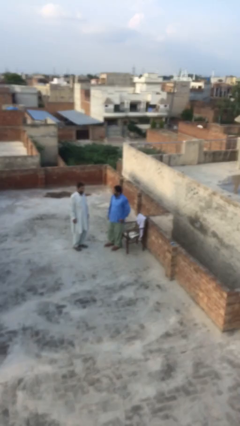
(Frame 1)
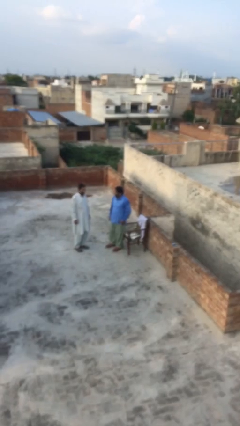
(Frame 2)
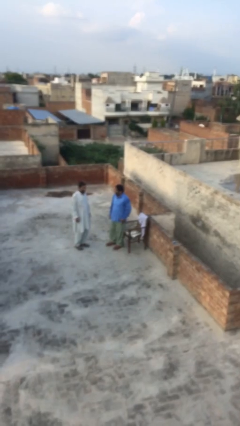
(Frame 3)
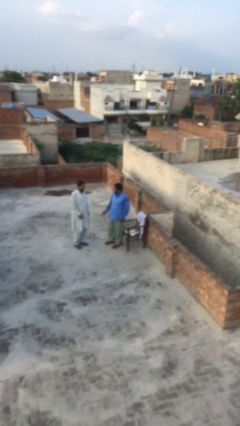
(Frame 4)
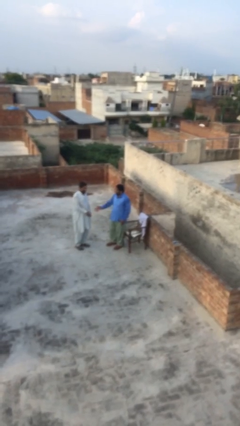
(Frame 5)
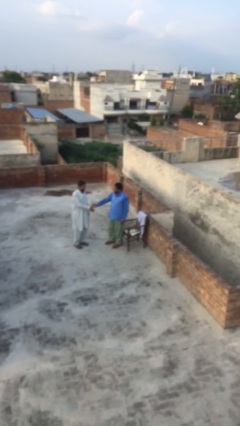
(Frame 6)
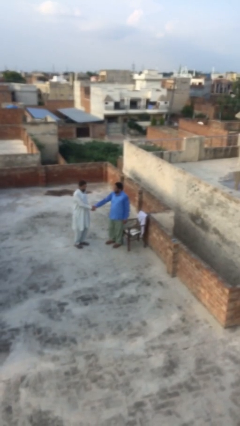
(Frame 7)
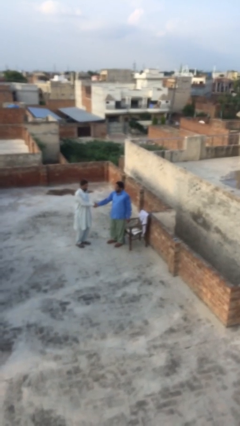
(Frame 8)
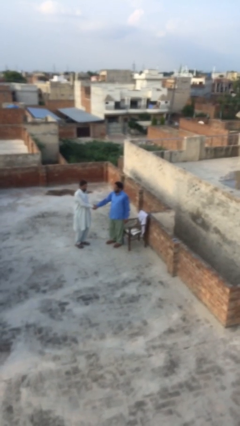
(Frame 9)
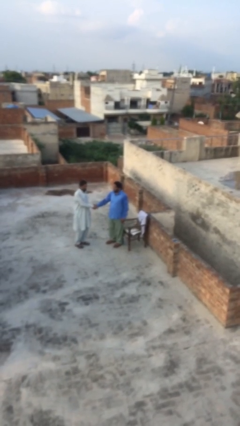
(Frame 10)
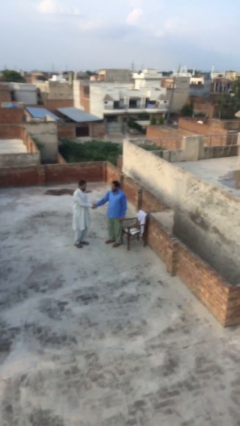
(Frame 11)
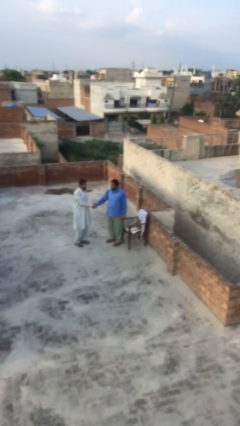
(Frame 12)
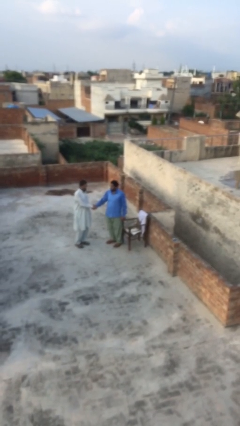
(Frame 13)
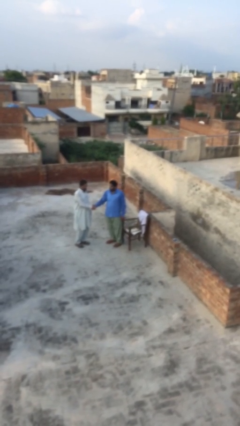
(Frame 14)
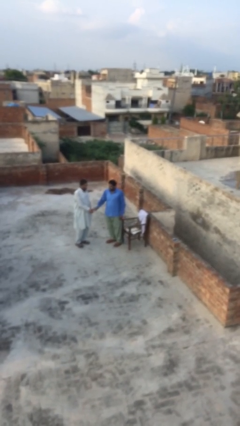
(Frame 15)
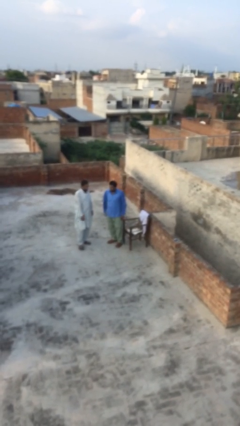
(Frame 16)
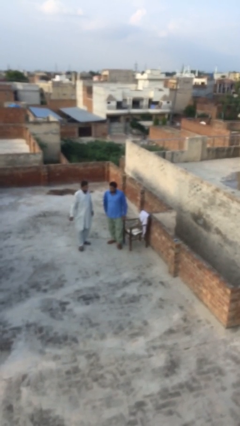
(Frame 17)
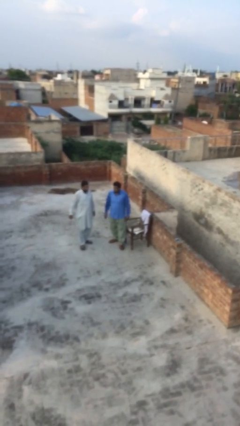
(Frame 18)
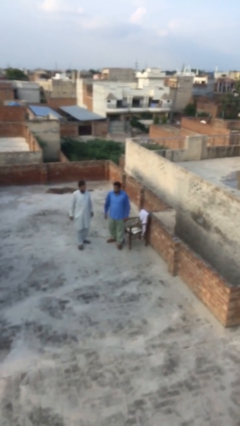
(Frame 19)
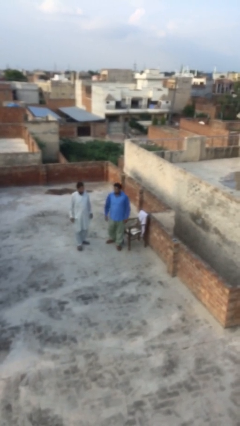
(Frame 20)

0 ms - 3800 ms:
person shakes hand

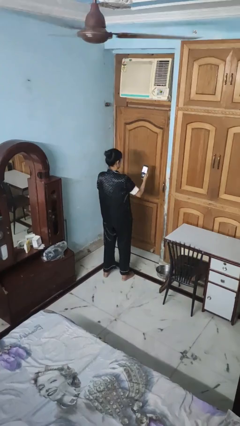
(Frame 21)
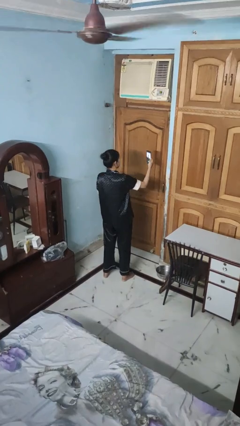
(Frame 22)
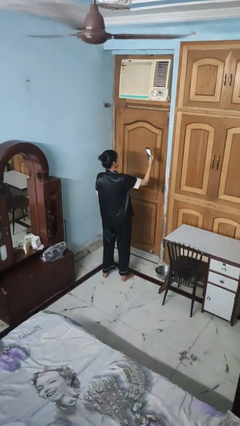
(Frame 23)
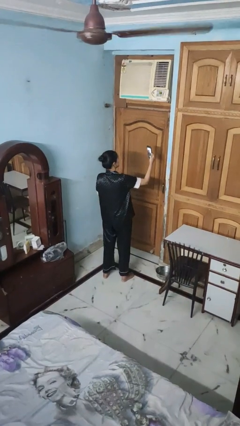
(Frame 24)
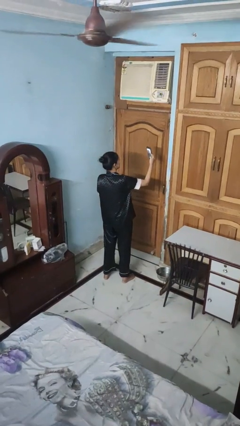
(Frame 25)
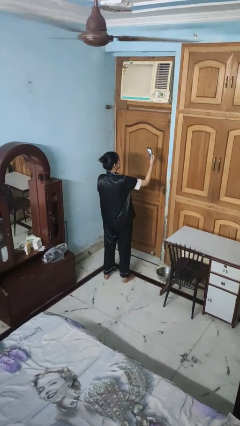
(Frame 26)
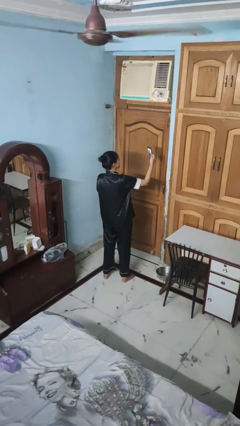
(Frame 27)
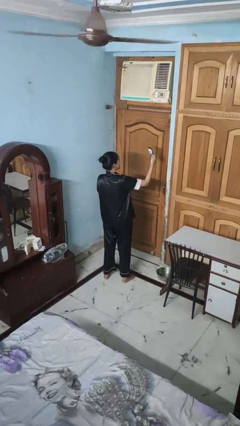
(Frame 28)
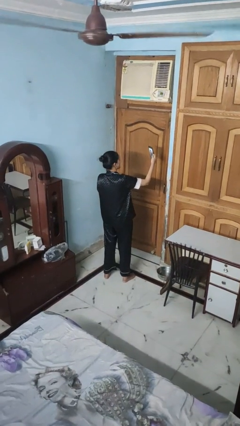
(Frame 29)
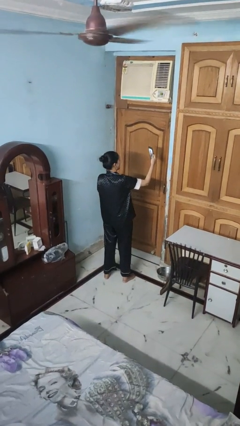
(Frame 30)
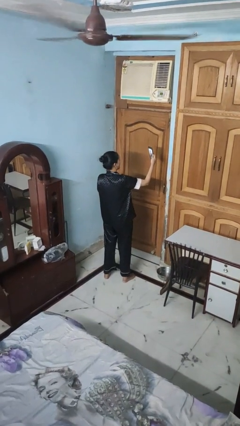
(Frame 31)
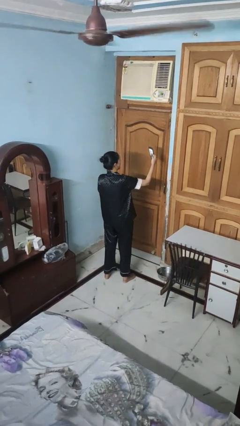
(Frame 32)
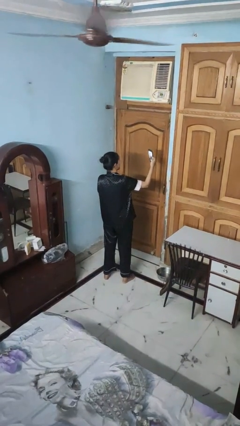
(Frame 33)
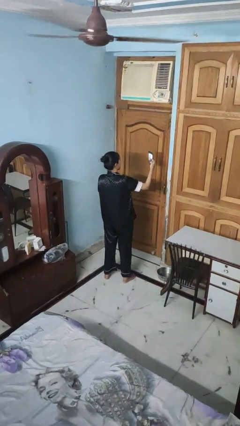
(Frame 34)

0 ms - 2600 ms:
person takes selfie

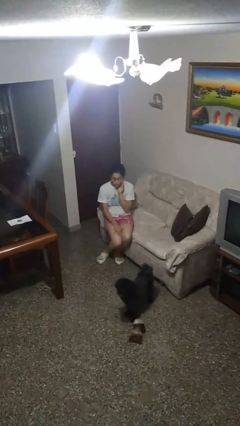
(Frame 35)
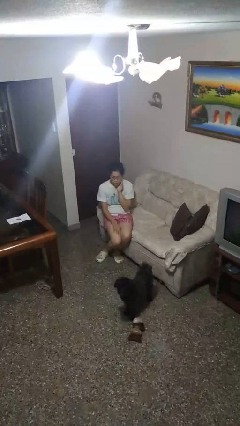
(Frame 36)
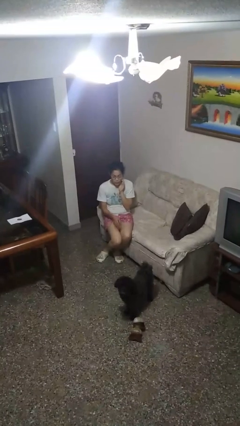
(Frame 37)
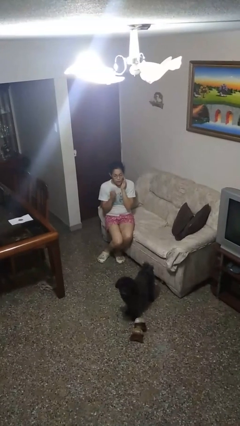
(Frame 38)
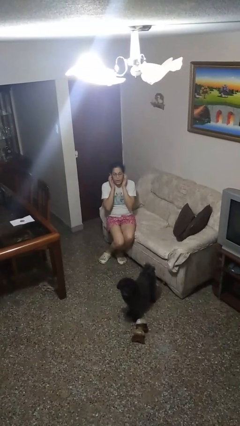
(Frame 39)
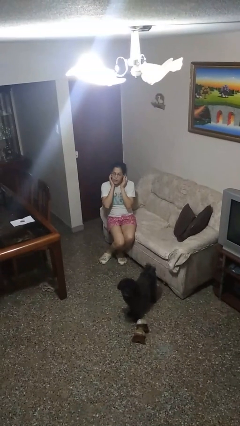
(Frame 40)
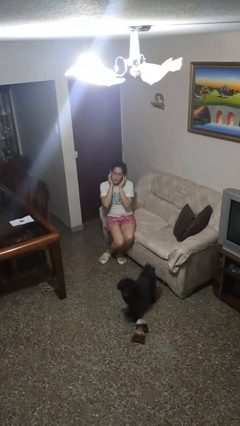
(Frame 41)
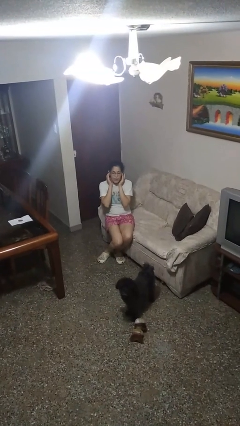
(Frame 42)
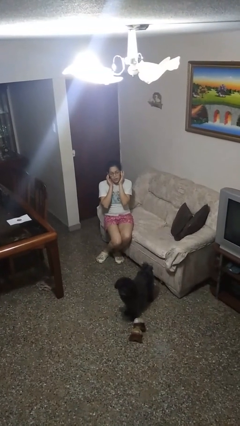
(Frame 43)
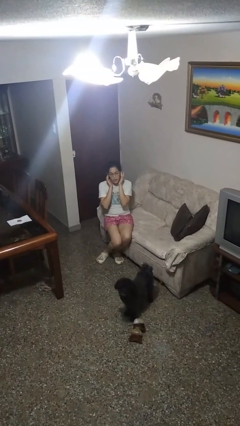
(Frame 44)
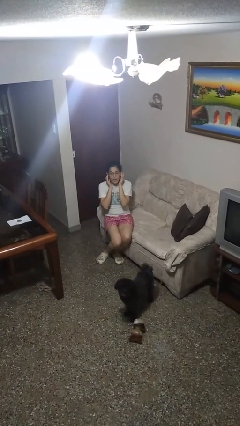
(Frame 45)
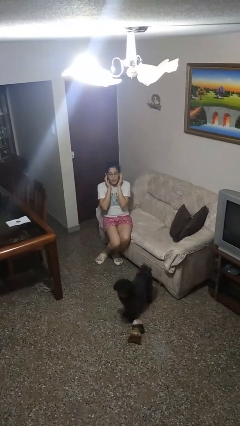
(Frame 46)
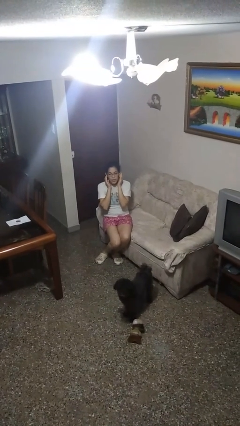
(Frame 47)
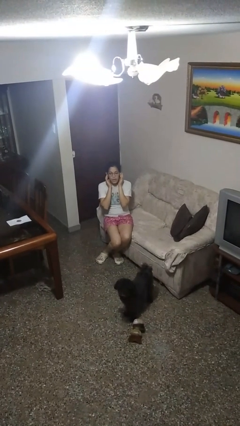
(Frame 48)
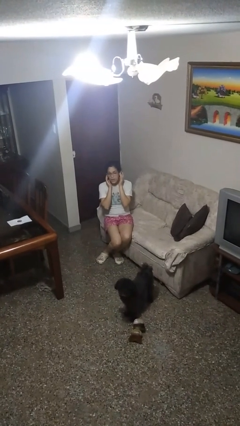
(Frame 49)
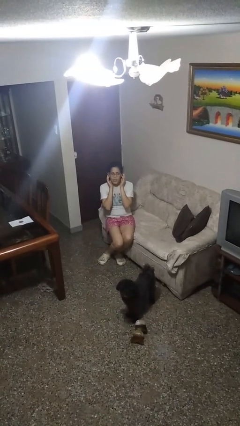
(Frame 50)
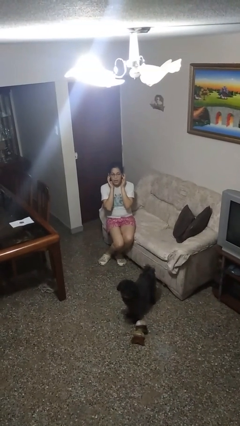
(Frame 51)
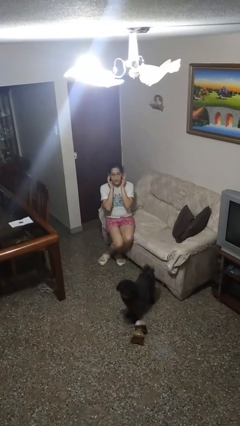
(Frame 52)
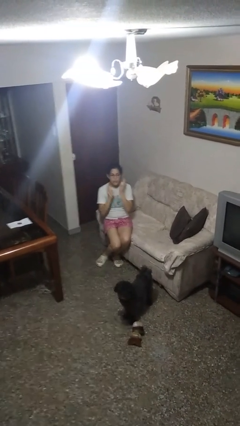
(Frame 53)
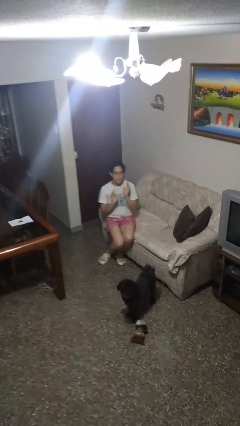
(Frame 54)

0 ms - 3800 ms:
person puts fingers in ear

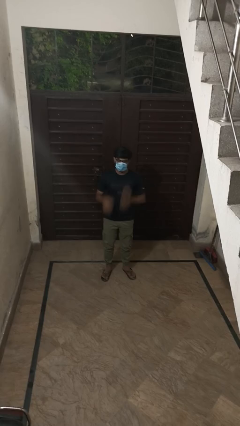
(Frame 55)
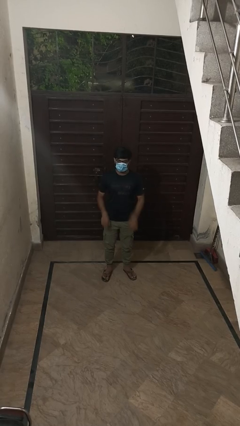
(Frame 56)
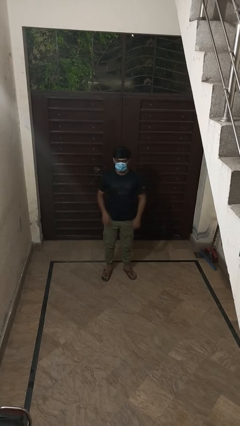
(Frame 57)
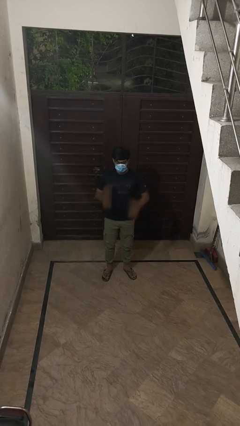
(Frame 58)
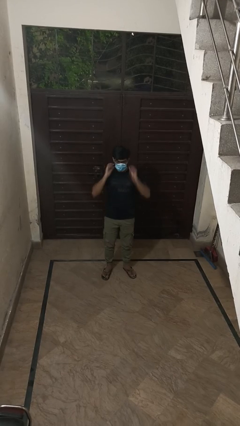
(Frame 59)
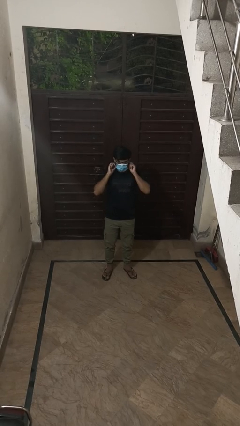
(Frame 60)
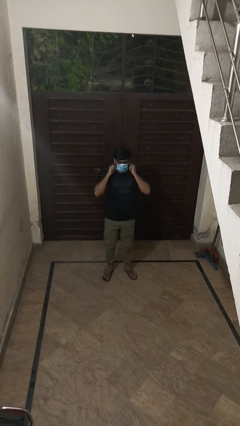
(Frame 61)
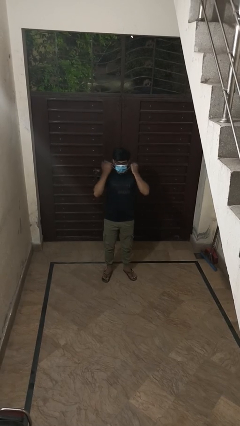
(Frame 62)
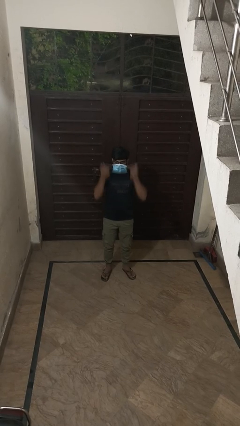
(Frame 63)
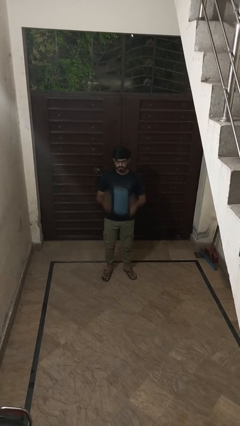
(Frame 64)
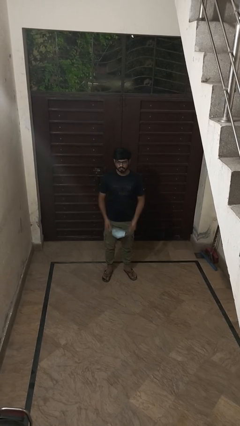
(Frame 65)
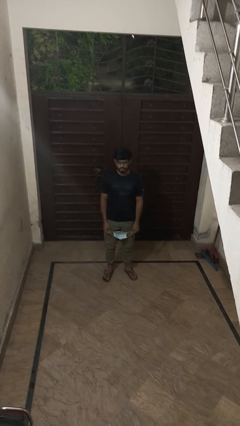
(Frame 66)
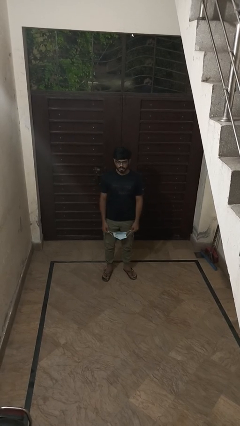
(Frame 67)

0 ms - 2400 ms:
person takes off facemask

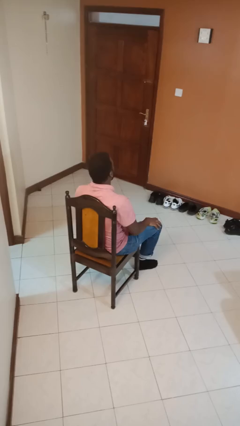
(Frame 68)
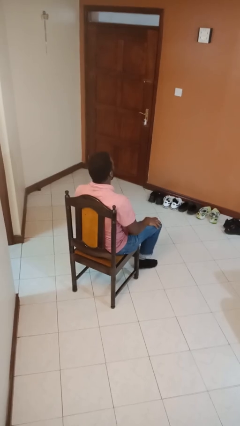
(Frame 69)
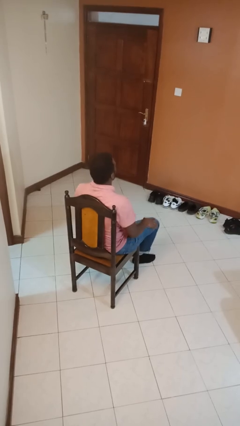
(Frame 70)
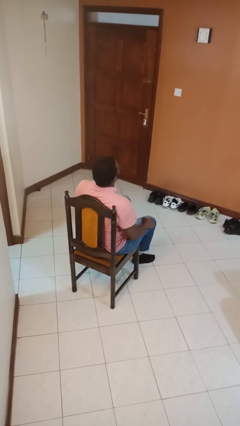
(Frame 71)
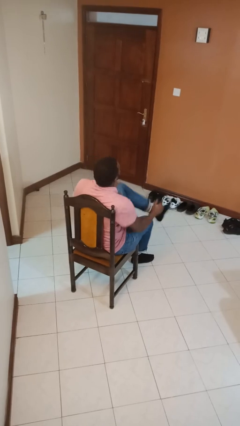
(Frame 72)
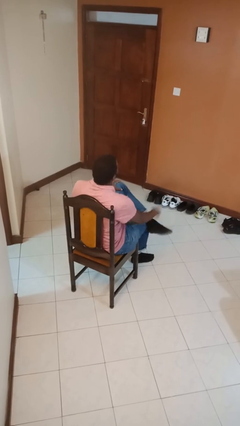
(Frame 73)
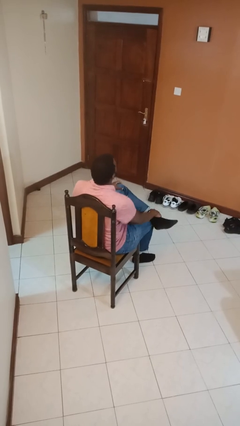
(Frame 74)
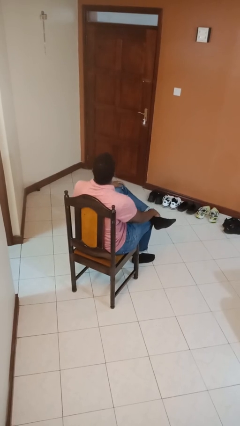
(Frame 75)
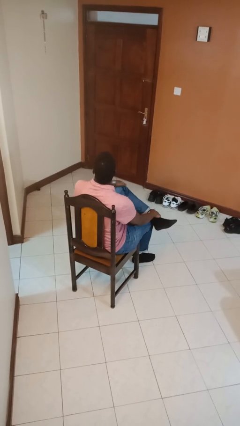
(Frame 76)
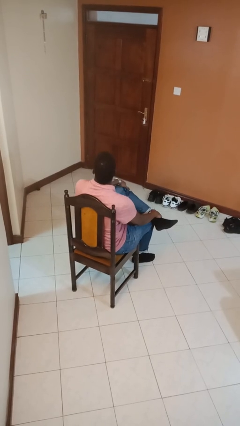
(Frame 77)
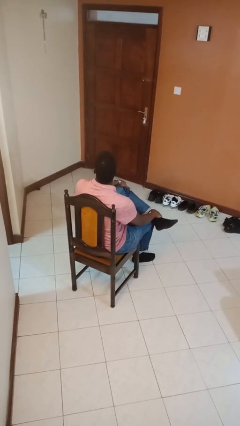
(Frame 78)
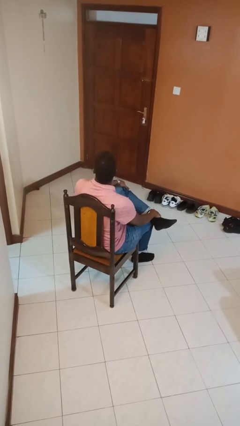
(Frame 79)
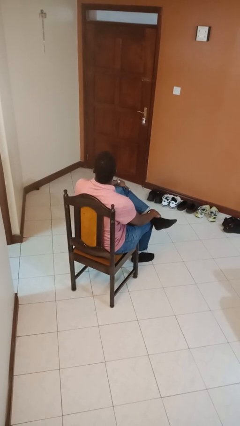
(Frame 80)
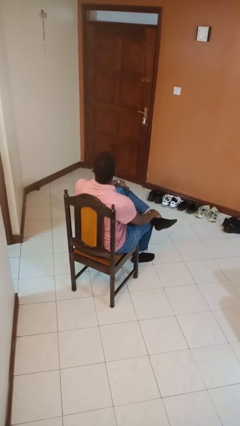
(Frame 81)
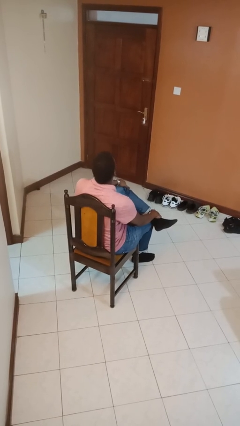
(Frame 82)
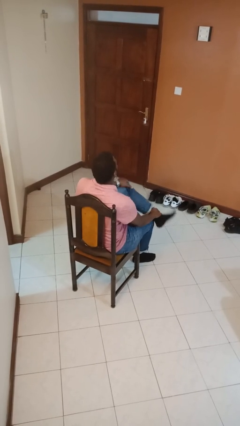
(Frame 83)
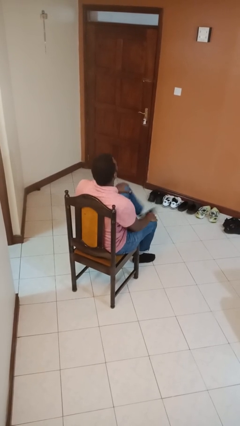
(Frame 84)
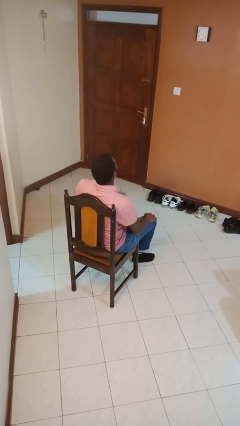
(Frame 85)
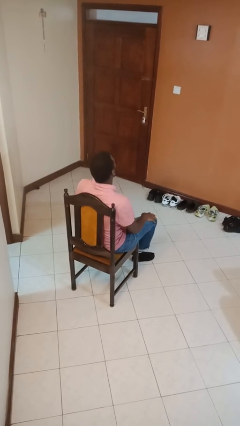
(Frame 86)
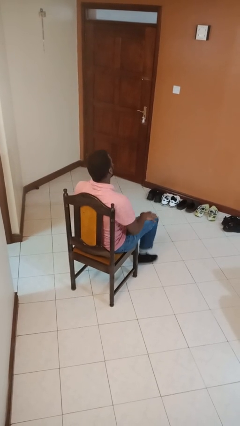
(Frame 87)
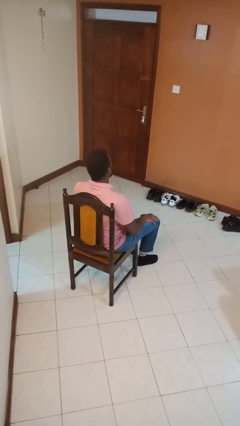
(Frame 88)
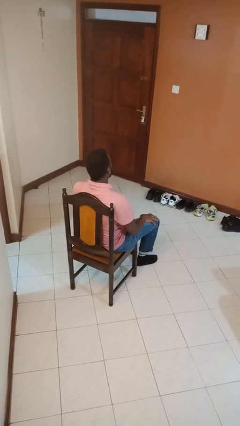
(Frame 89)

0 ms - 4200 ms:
person crosses legs

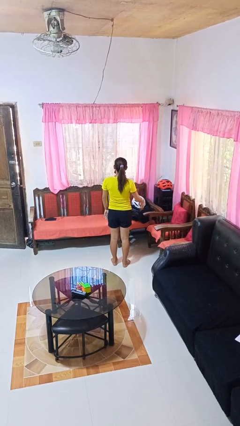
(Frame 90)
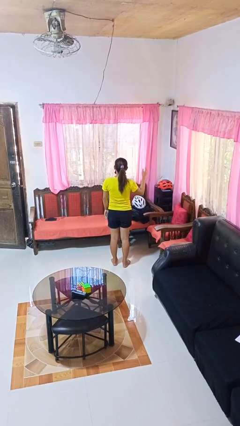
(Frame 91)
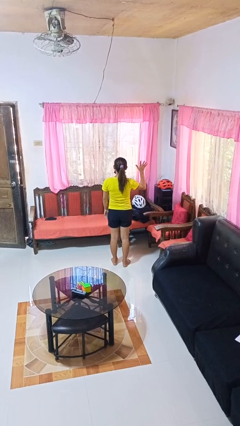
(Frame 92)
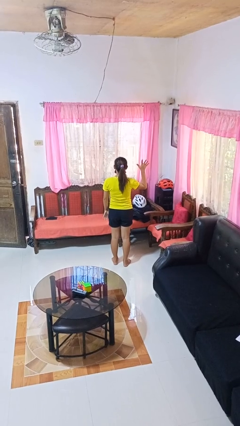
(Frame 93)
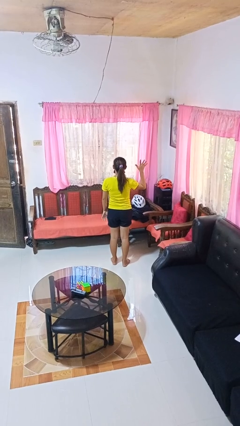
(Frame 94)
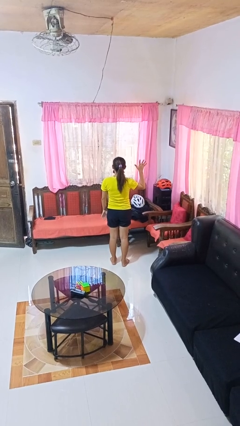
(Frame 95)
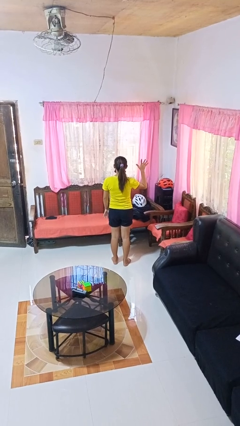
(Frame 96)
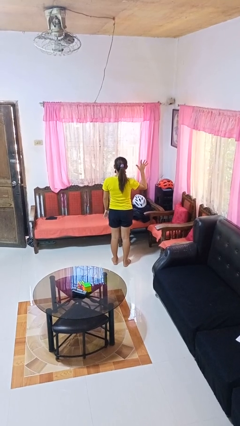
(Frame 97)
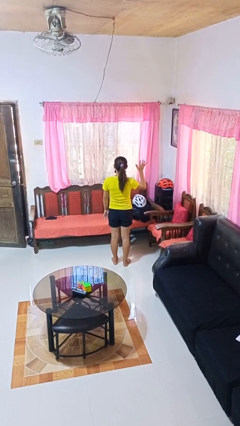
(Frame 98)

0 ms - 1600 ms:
person gestures number five
